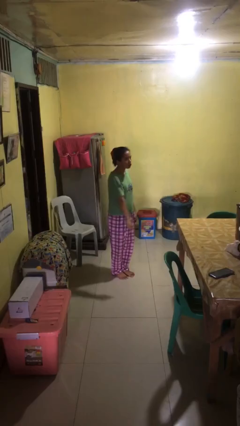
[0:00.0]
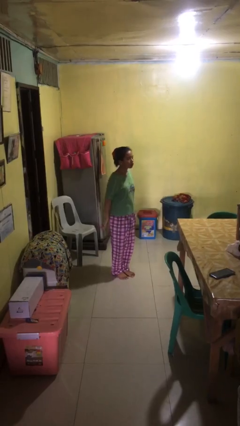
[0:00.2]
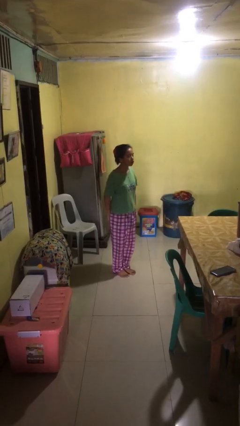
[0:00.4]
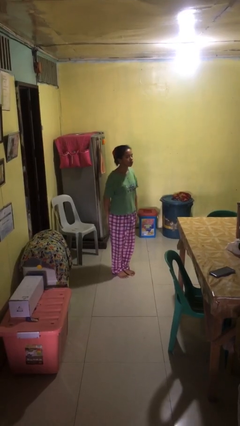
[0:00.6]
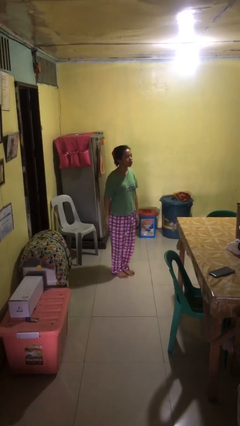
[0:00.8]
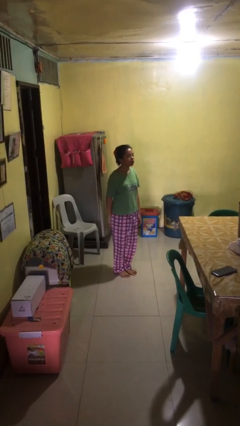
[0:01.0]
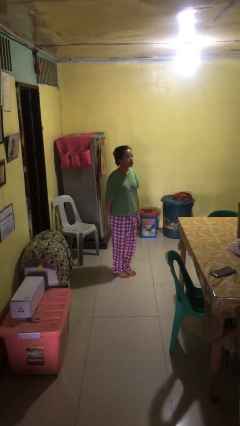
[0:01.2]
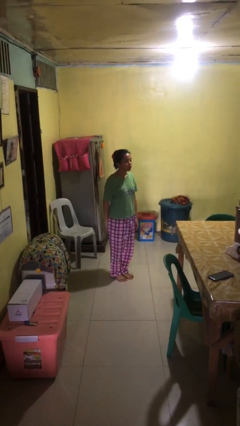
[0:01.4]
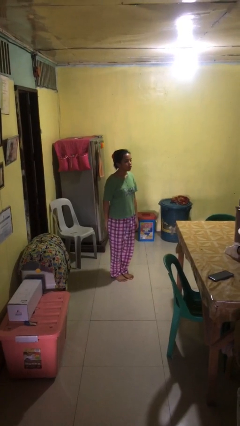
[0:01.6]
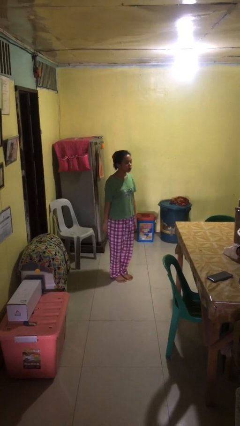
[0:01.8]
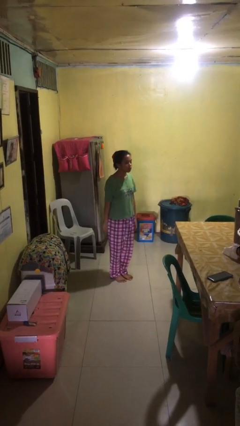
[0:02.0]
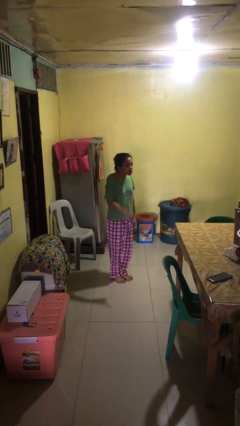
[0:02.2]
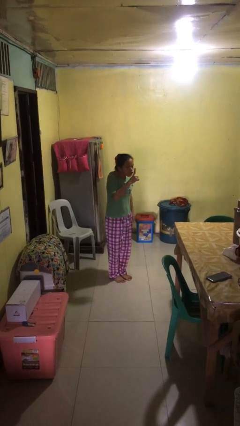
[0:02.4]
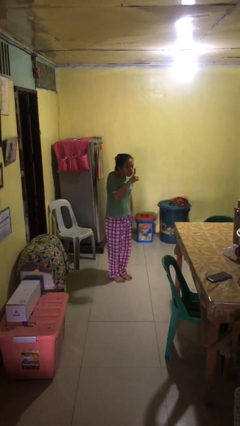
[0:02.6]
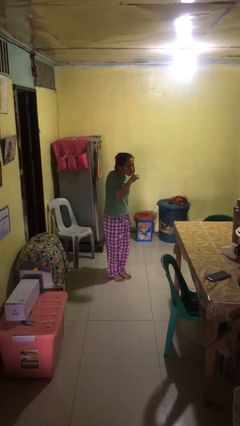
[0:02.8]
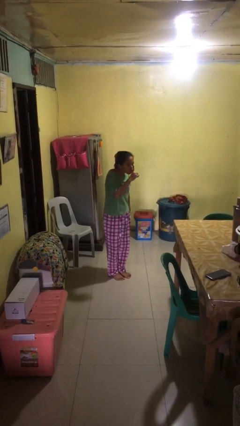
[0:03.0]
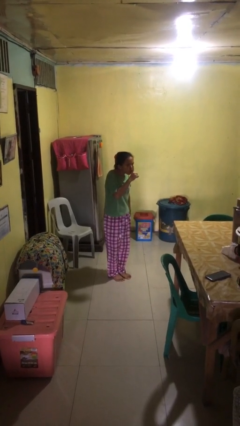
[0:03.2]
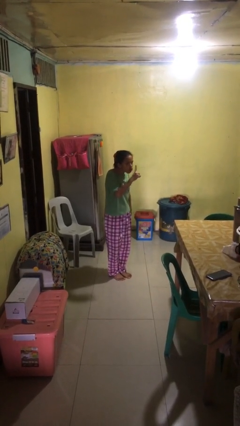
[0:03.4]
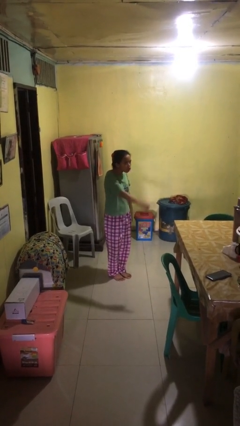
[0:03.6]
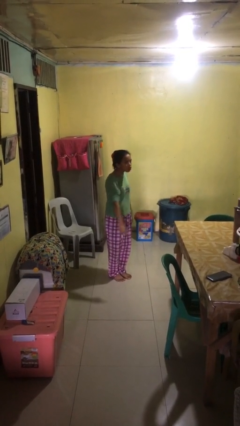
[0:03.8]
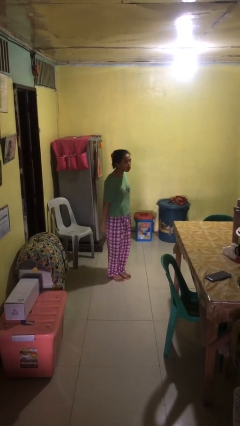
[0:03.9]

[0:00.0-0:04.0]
person gestures be quiet

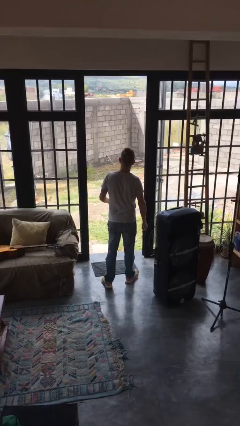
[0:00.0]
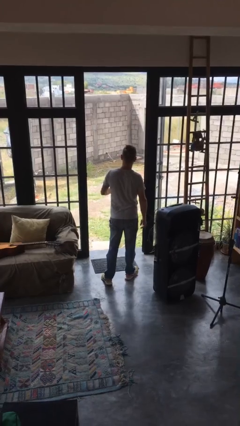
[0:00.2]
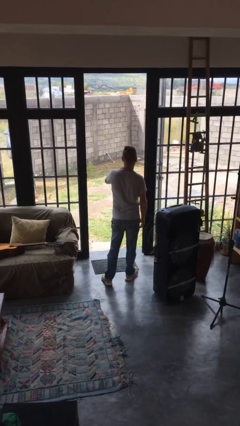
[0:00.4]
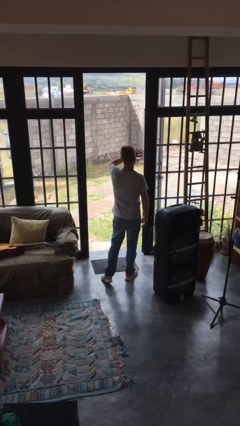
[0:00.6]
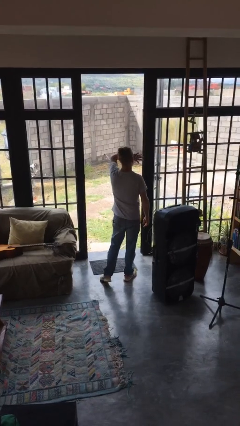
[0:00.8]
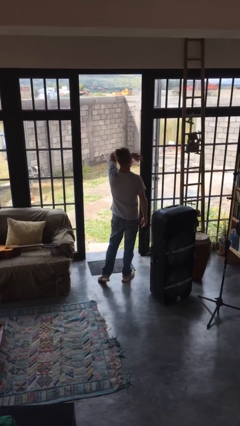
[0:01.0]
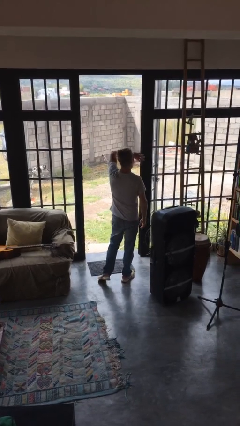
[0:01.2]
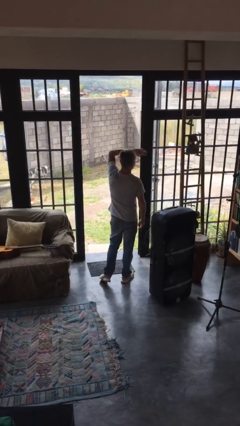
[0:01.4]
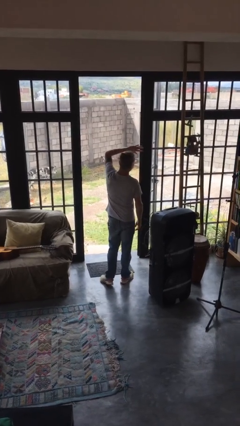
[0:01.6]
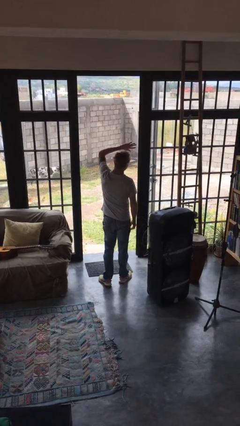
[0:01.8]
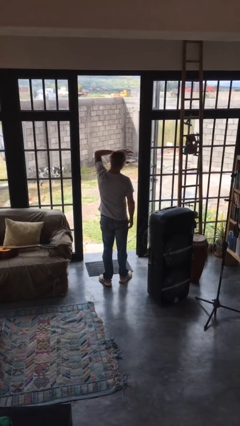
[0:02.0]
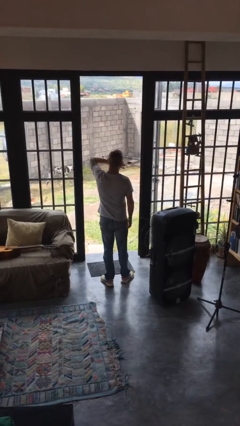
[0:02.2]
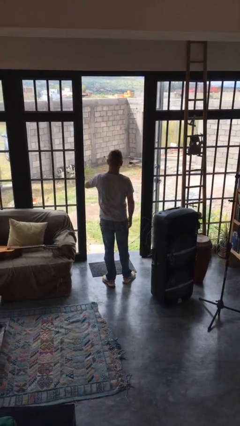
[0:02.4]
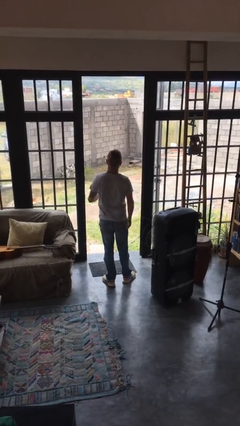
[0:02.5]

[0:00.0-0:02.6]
person shades eyes

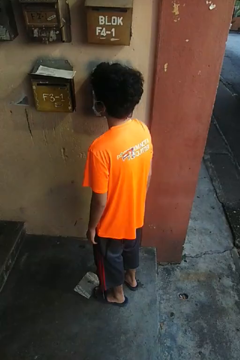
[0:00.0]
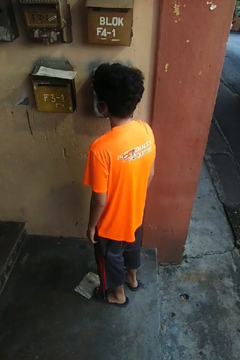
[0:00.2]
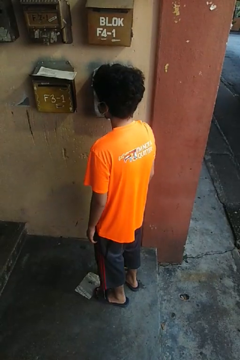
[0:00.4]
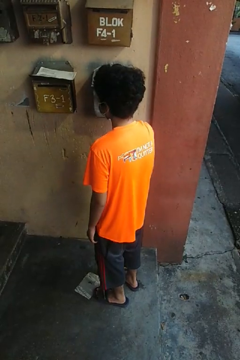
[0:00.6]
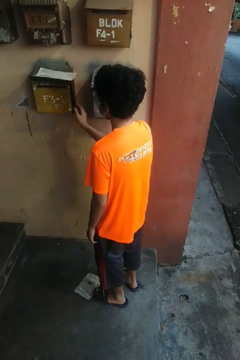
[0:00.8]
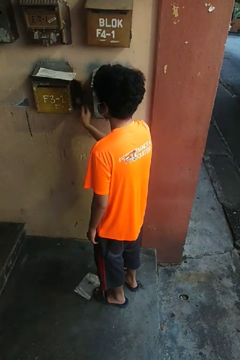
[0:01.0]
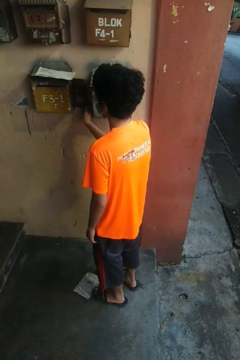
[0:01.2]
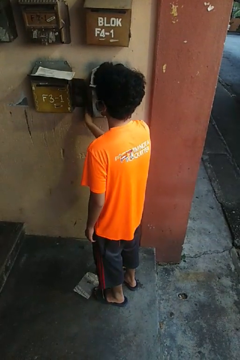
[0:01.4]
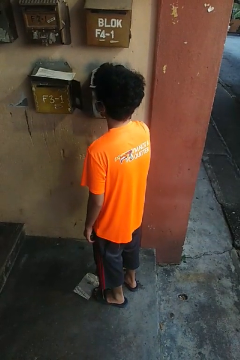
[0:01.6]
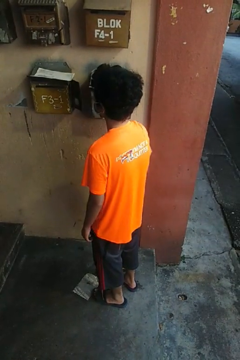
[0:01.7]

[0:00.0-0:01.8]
person opens mailbox

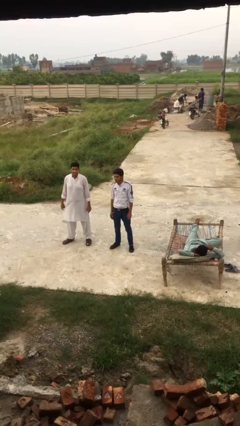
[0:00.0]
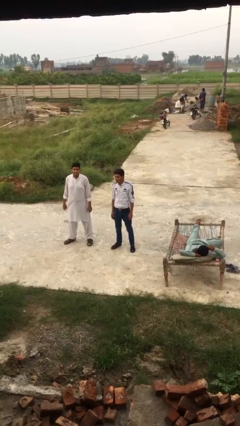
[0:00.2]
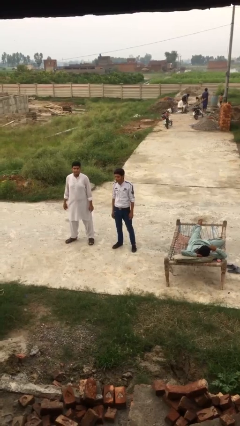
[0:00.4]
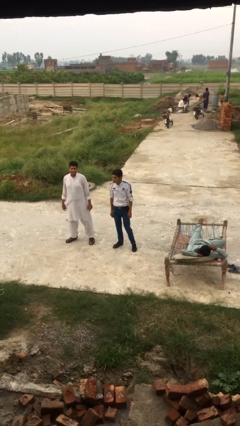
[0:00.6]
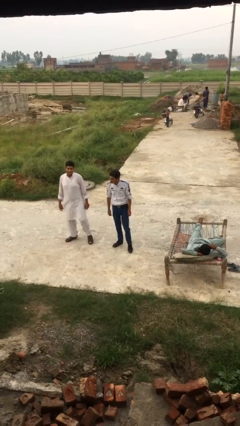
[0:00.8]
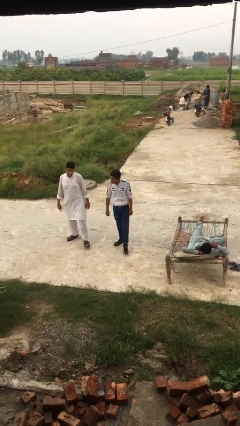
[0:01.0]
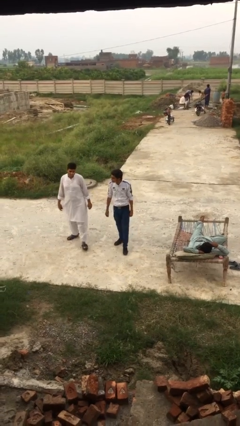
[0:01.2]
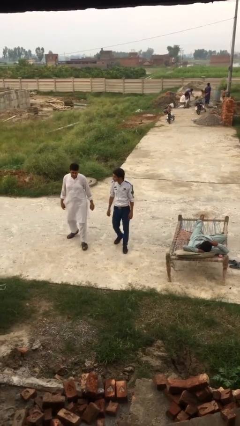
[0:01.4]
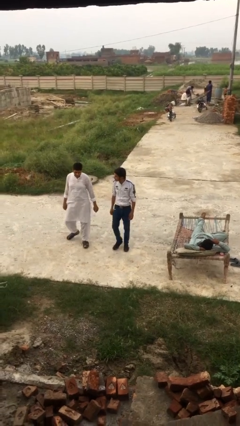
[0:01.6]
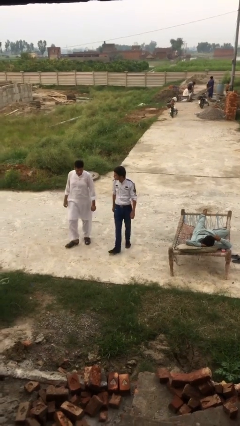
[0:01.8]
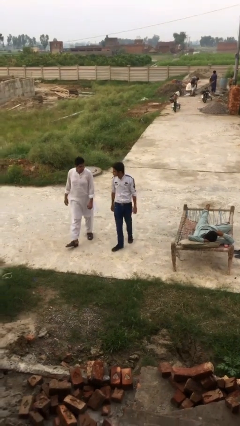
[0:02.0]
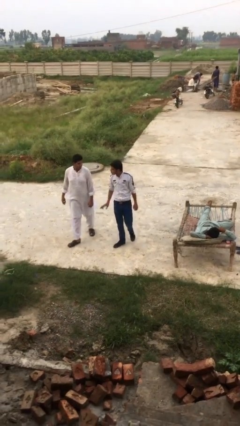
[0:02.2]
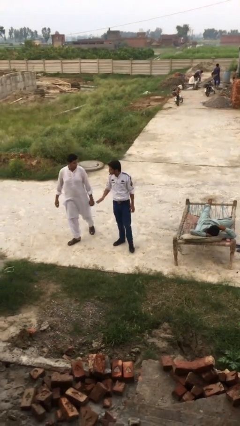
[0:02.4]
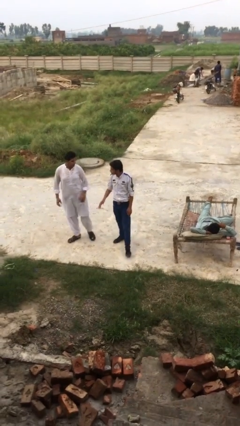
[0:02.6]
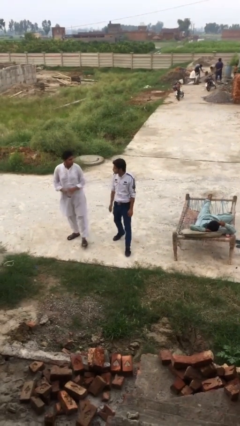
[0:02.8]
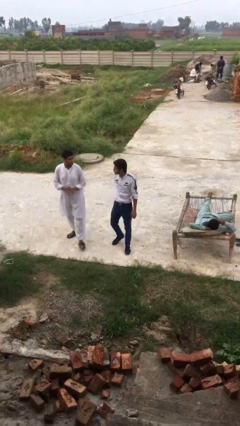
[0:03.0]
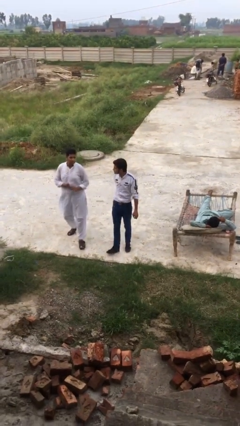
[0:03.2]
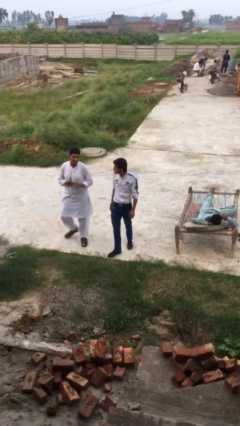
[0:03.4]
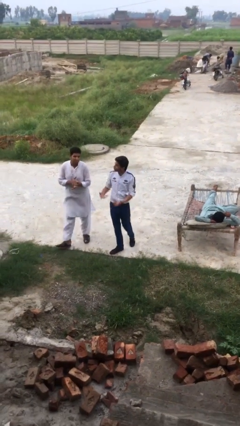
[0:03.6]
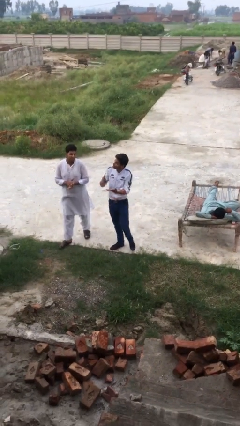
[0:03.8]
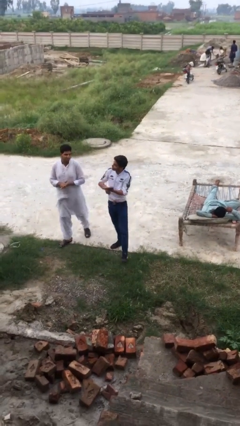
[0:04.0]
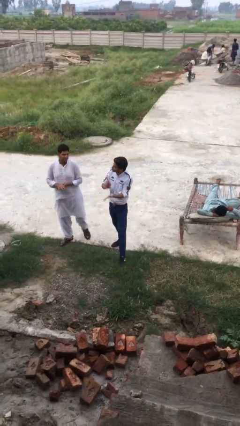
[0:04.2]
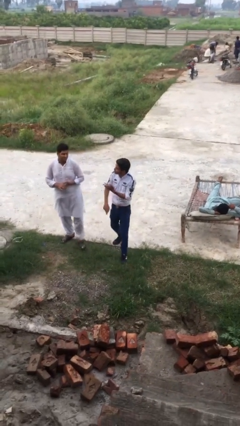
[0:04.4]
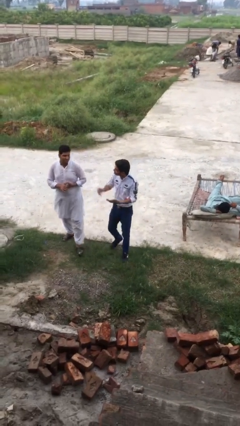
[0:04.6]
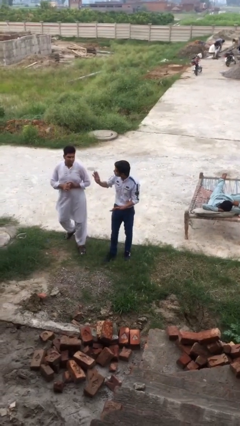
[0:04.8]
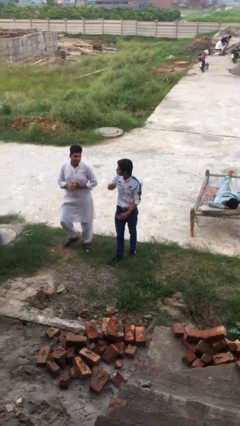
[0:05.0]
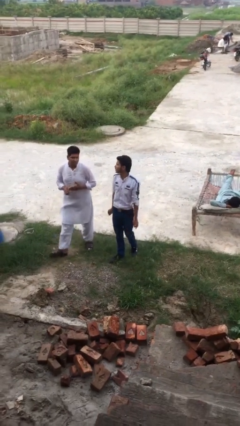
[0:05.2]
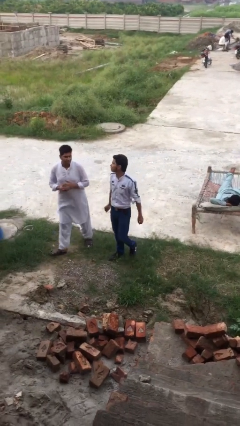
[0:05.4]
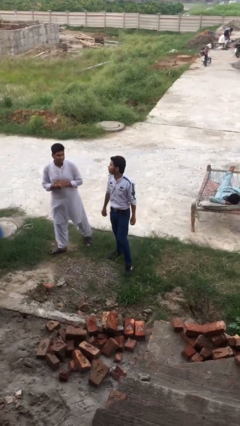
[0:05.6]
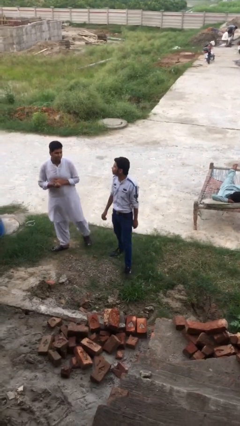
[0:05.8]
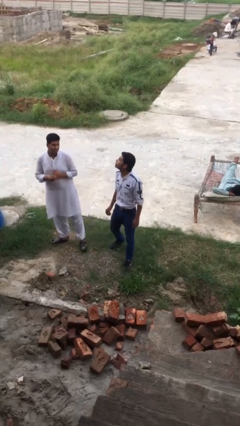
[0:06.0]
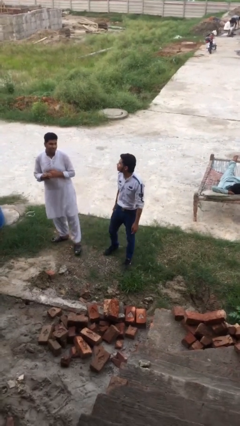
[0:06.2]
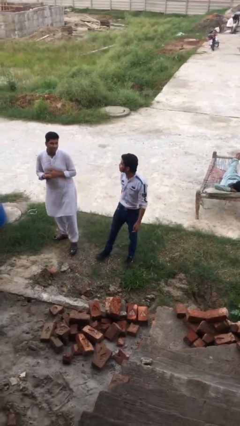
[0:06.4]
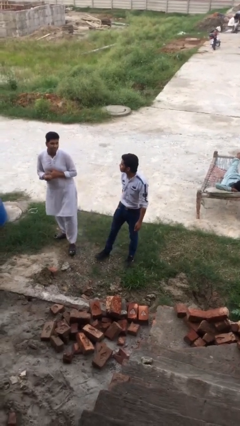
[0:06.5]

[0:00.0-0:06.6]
person talks to person

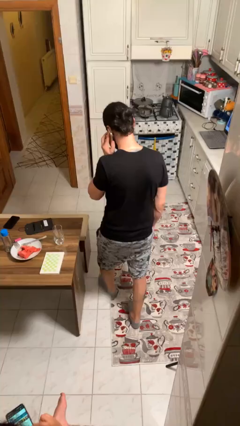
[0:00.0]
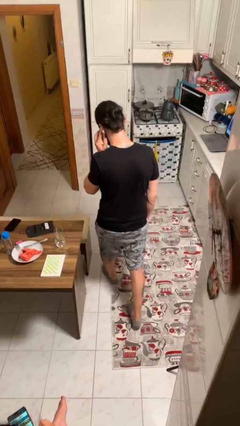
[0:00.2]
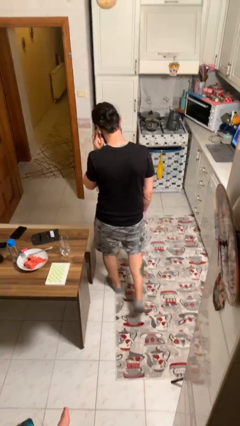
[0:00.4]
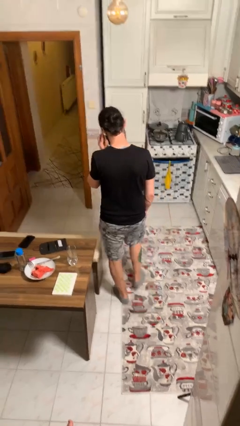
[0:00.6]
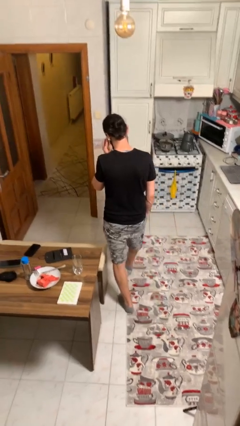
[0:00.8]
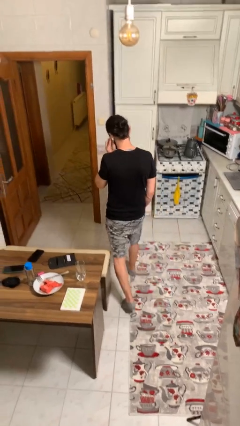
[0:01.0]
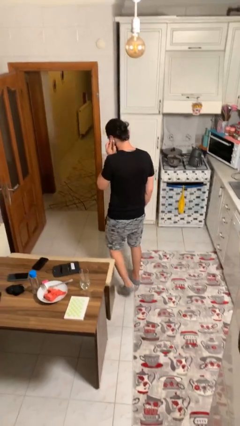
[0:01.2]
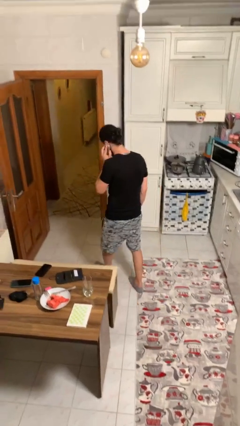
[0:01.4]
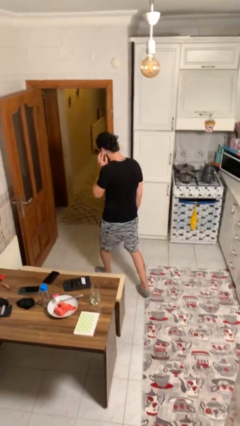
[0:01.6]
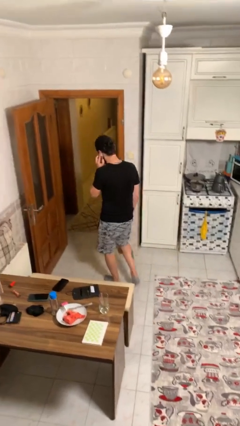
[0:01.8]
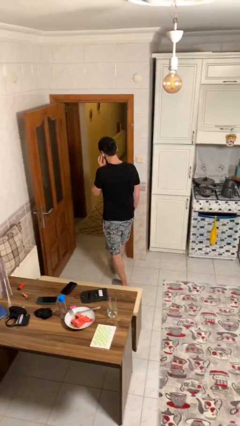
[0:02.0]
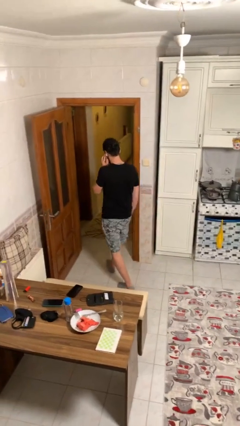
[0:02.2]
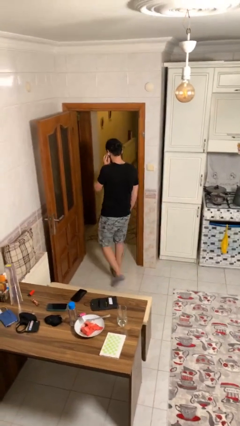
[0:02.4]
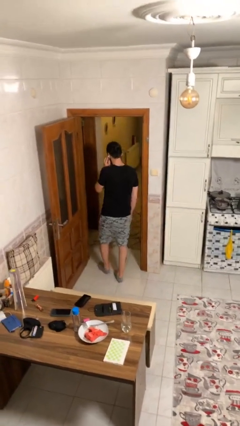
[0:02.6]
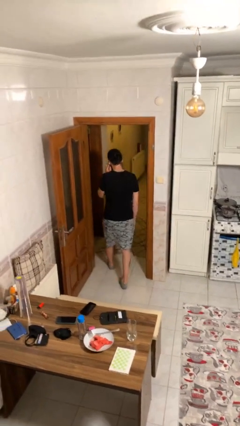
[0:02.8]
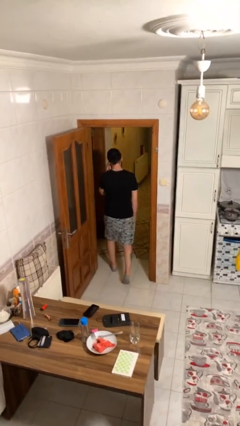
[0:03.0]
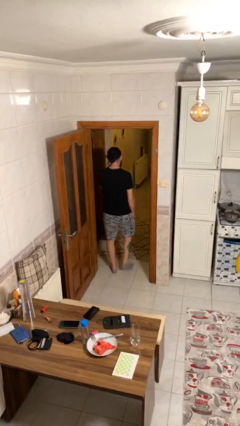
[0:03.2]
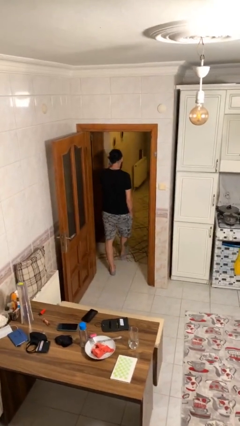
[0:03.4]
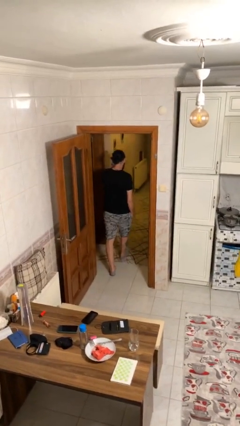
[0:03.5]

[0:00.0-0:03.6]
person exits scene through structure
